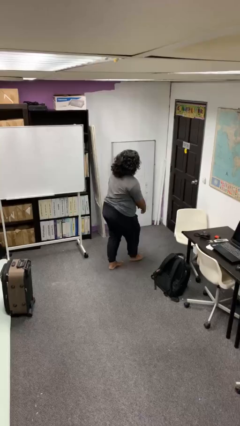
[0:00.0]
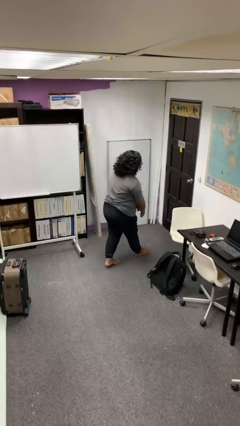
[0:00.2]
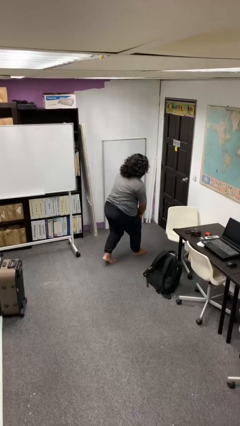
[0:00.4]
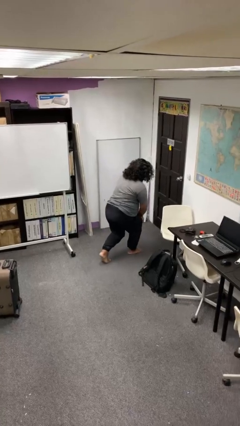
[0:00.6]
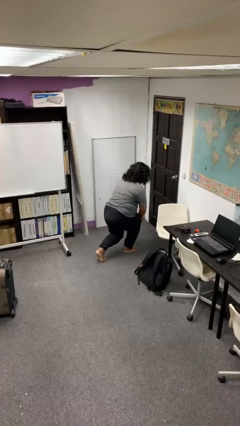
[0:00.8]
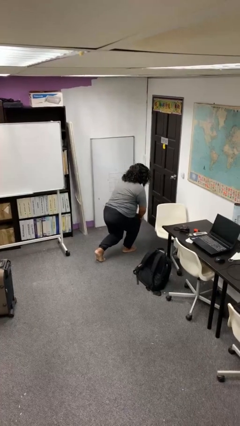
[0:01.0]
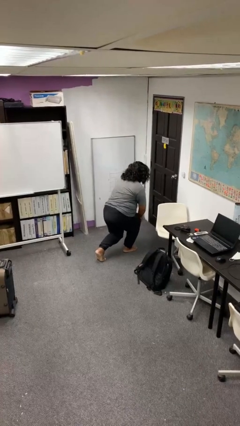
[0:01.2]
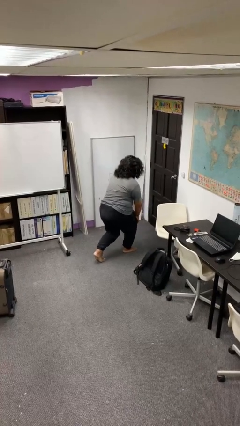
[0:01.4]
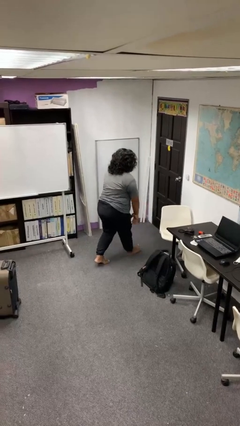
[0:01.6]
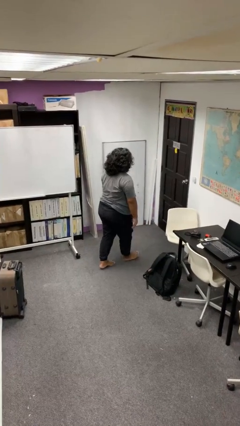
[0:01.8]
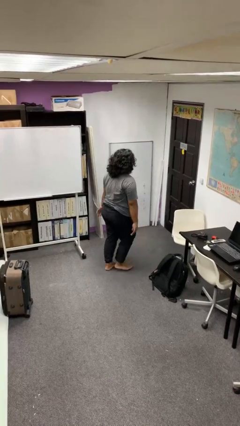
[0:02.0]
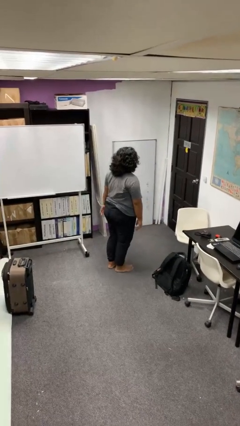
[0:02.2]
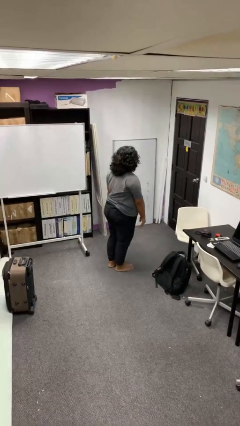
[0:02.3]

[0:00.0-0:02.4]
person exercises with lunges

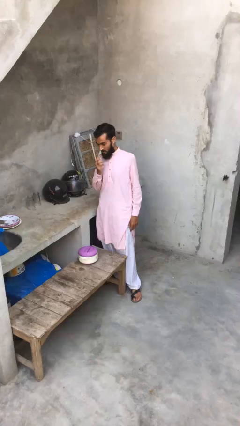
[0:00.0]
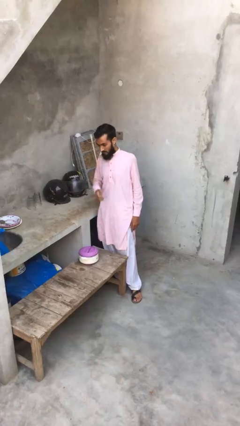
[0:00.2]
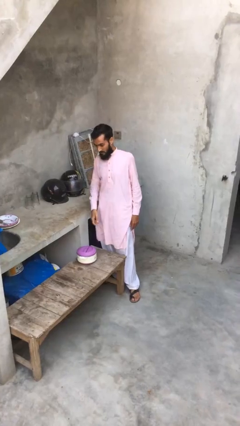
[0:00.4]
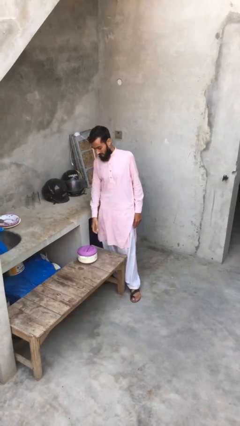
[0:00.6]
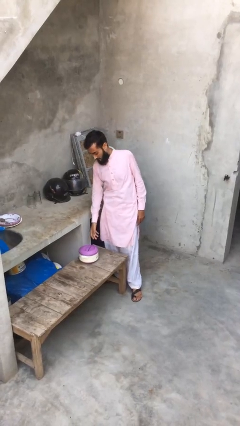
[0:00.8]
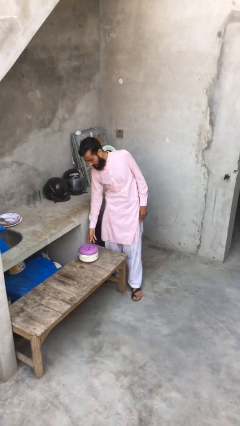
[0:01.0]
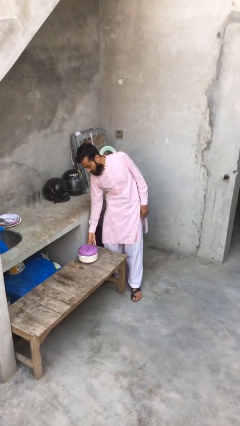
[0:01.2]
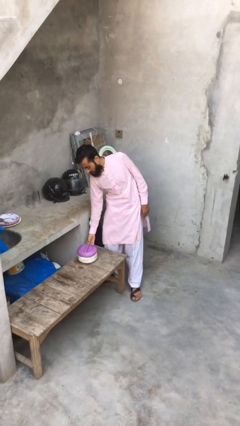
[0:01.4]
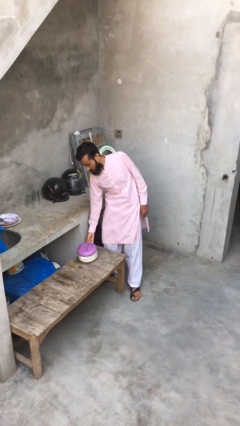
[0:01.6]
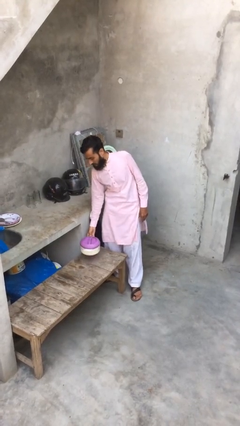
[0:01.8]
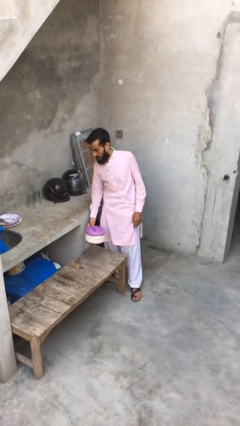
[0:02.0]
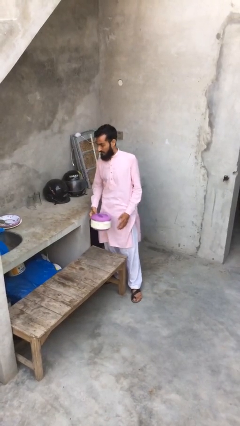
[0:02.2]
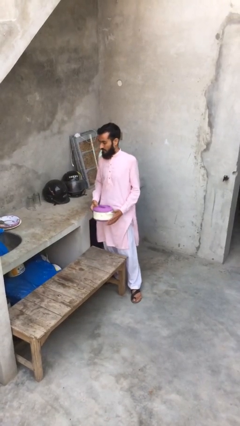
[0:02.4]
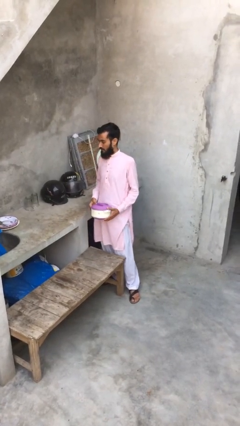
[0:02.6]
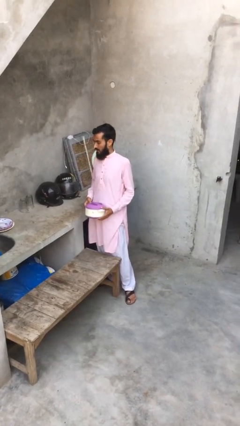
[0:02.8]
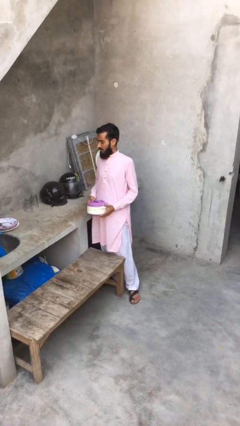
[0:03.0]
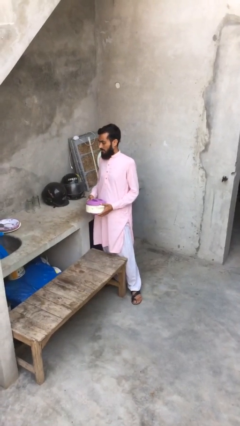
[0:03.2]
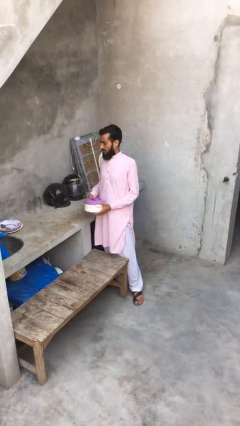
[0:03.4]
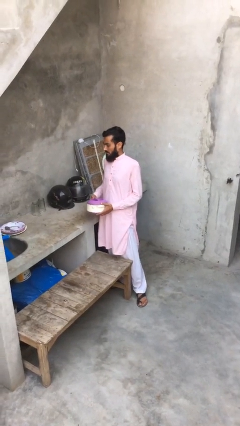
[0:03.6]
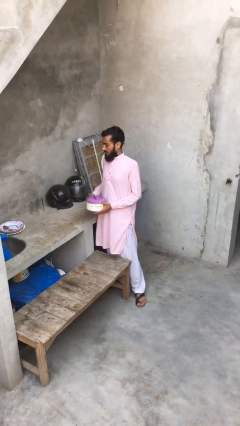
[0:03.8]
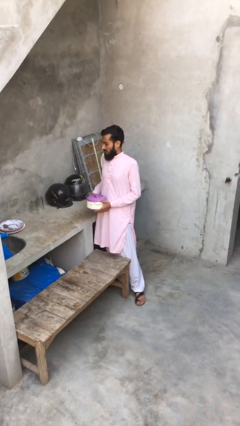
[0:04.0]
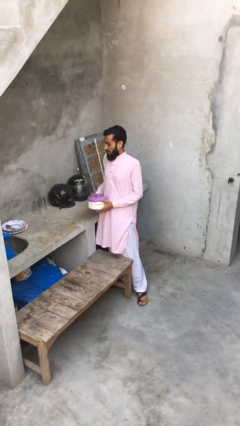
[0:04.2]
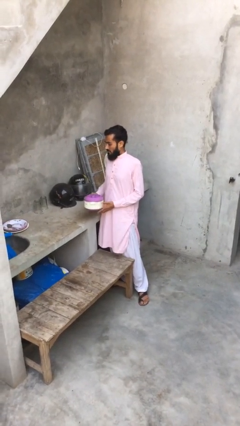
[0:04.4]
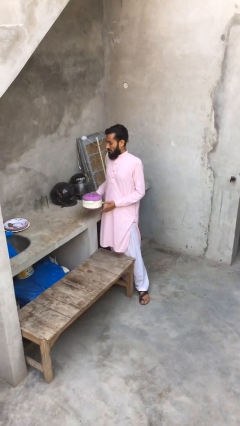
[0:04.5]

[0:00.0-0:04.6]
person picks up object from table

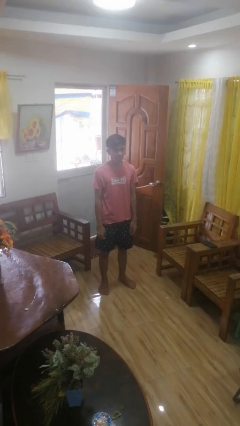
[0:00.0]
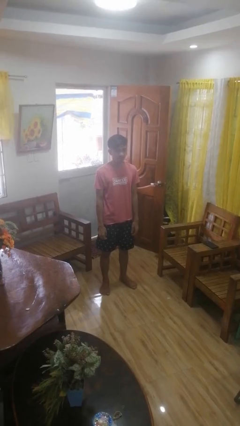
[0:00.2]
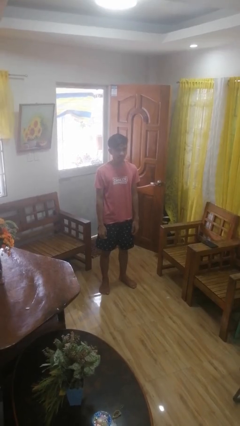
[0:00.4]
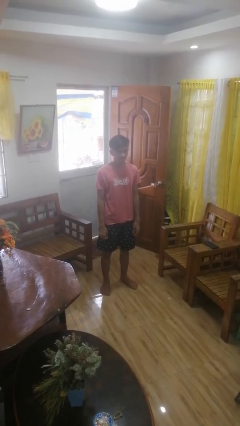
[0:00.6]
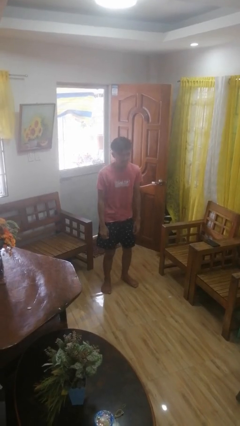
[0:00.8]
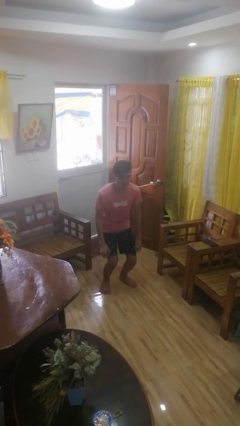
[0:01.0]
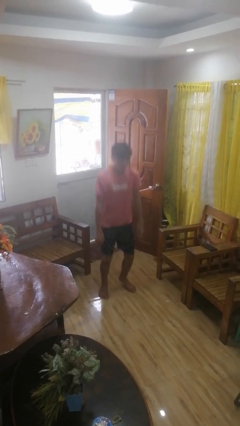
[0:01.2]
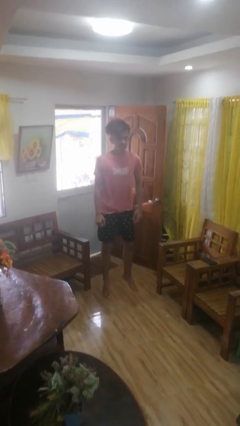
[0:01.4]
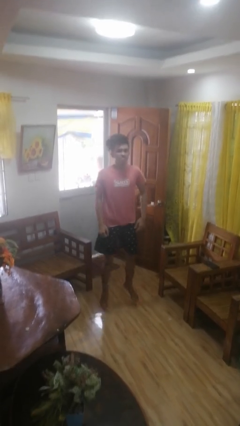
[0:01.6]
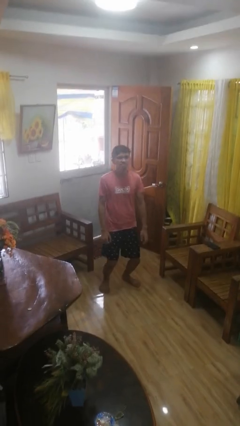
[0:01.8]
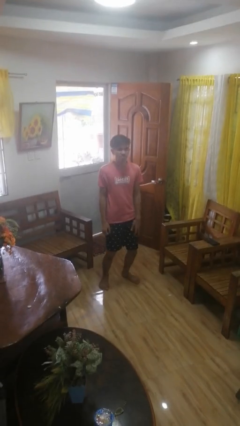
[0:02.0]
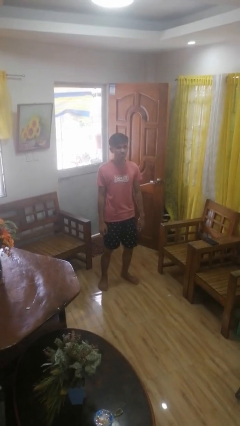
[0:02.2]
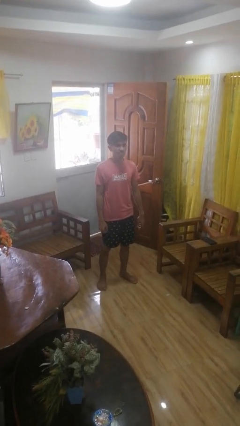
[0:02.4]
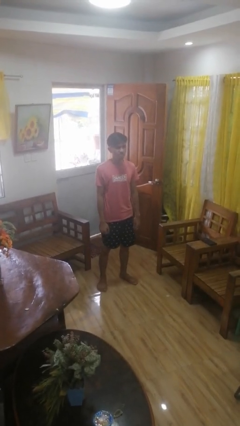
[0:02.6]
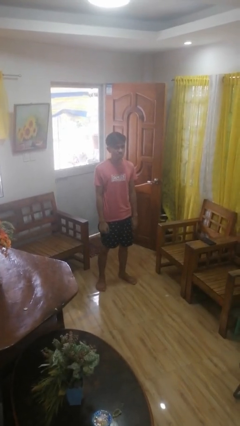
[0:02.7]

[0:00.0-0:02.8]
person jumps

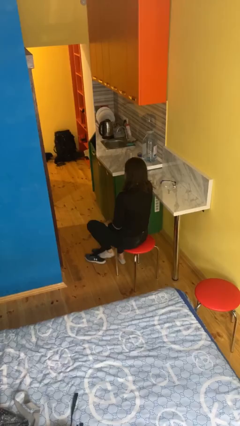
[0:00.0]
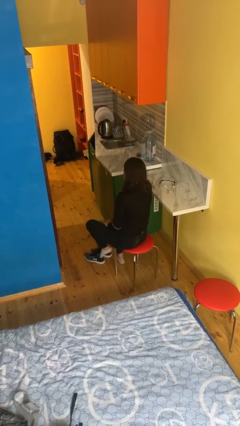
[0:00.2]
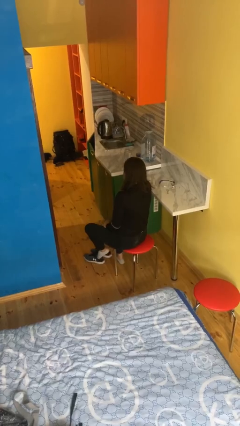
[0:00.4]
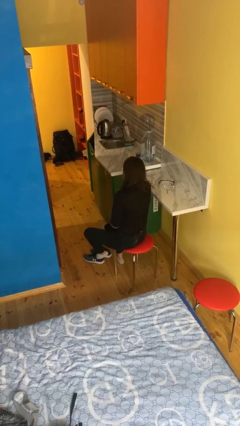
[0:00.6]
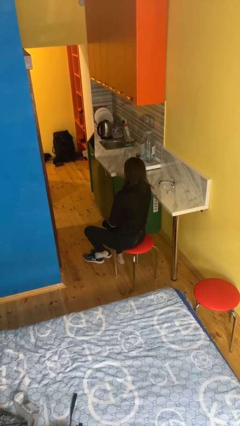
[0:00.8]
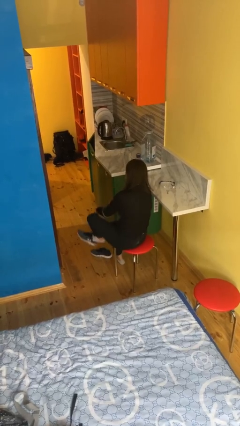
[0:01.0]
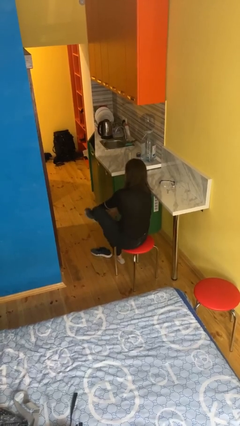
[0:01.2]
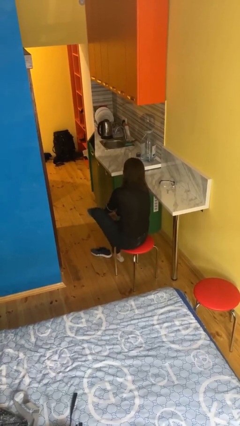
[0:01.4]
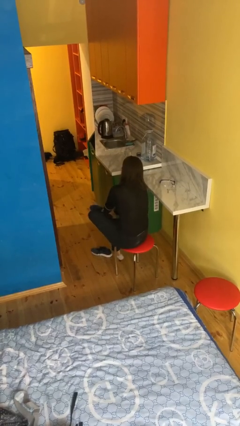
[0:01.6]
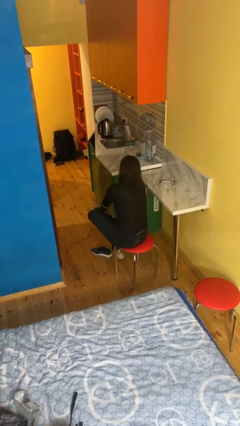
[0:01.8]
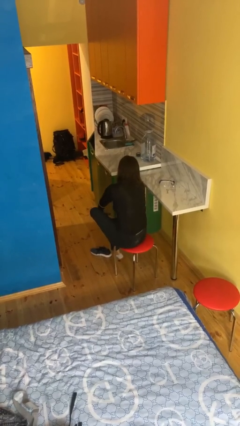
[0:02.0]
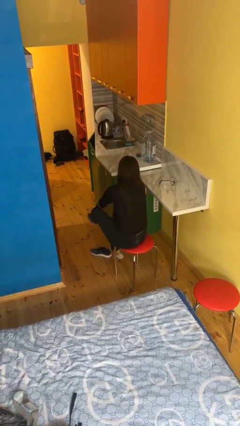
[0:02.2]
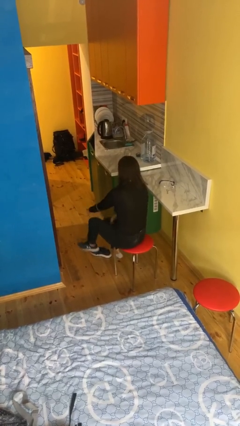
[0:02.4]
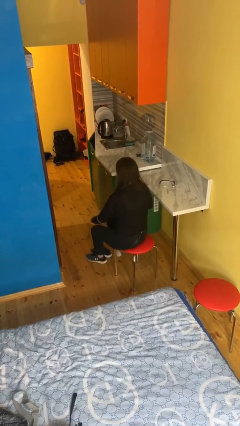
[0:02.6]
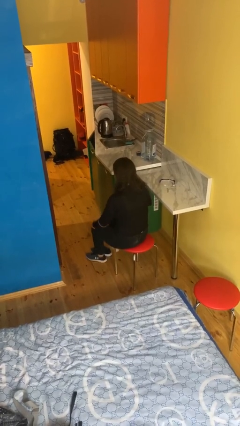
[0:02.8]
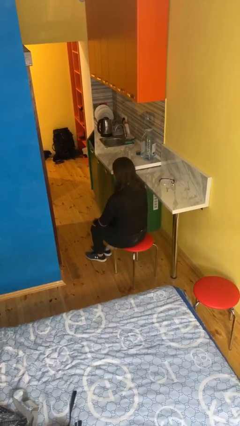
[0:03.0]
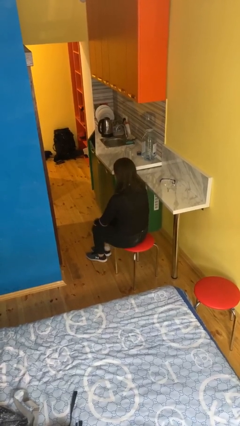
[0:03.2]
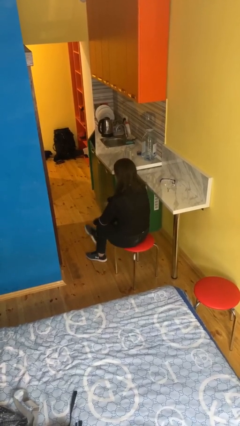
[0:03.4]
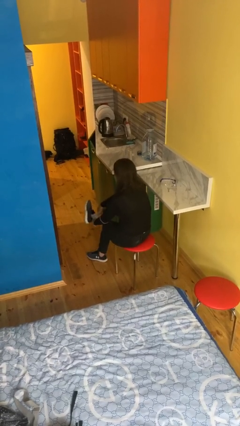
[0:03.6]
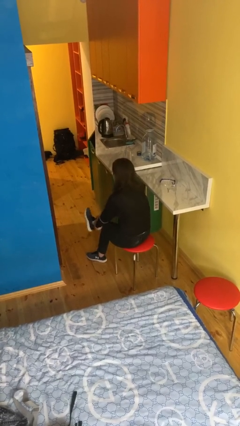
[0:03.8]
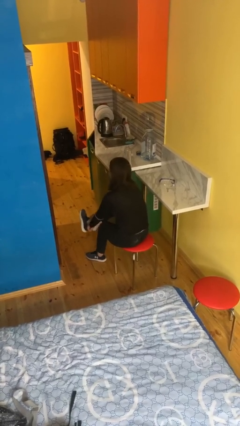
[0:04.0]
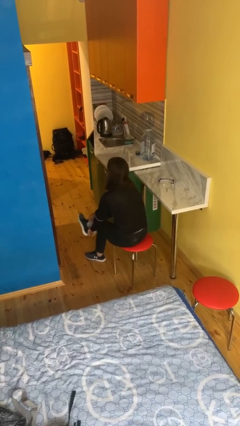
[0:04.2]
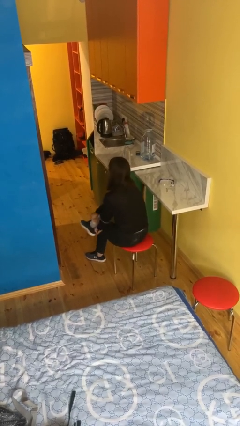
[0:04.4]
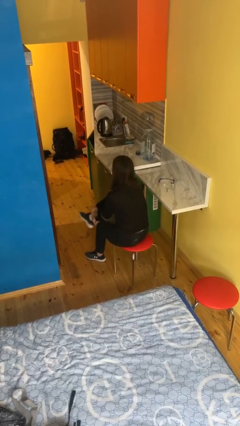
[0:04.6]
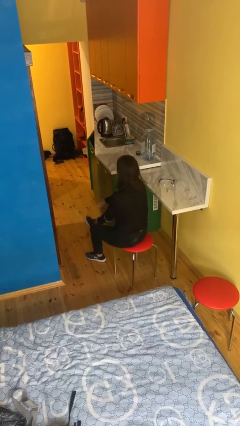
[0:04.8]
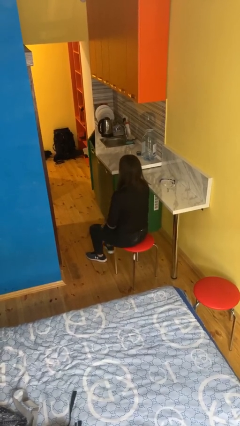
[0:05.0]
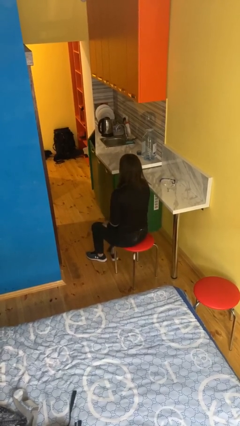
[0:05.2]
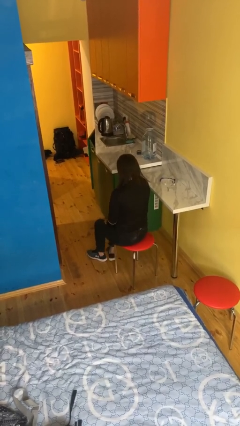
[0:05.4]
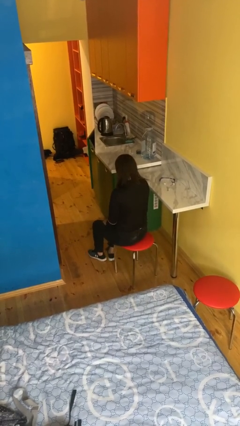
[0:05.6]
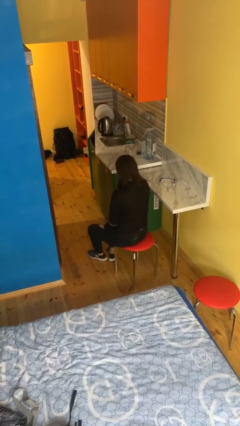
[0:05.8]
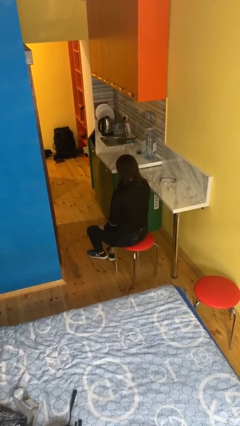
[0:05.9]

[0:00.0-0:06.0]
person puts on shoes

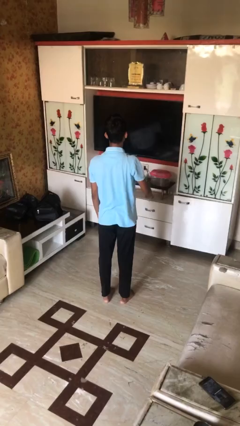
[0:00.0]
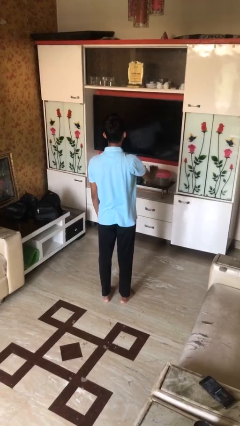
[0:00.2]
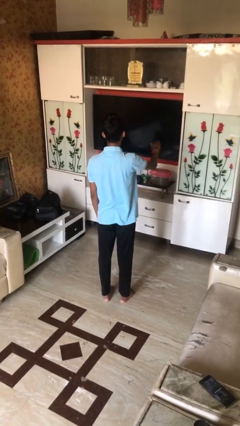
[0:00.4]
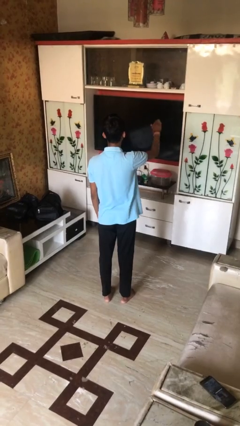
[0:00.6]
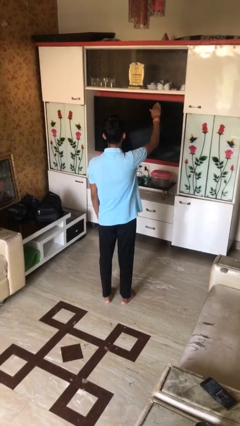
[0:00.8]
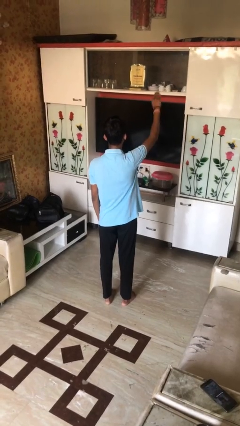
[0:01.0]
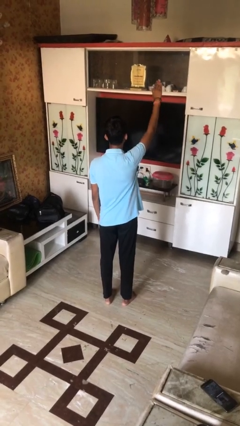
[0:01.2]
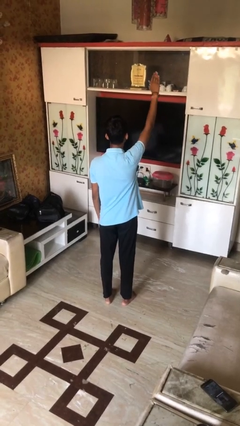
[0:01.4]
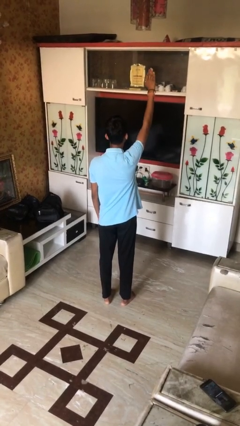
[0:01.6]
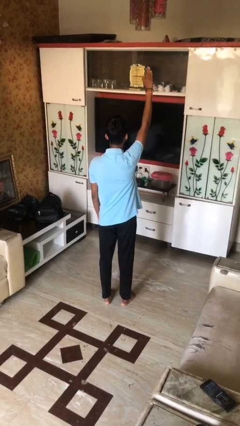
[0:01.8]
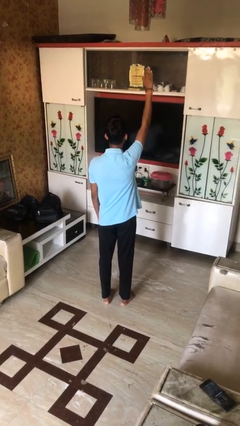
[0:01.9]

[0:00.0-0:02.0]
person gestures raise hand
